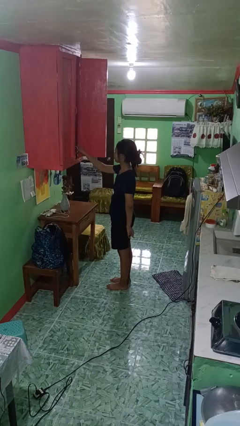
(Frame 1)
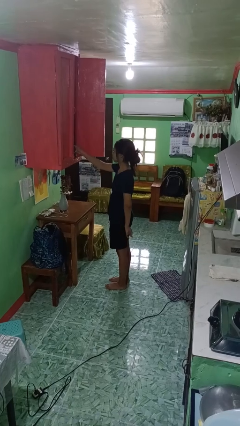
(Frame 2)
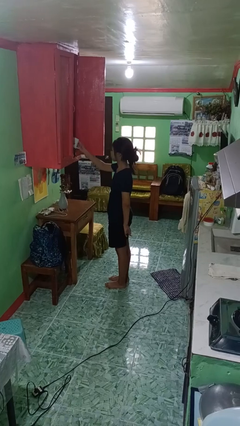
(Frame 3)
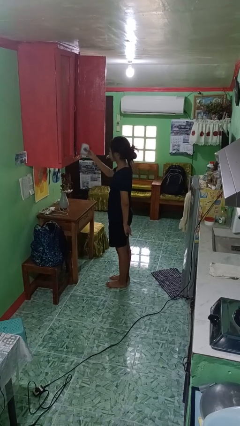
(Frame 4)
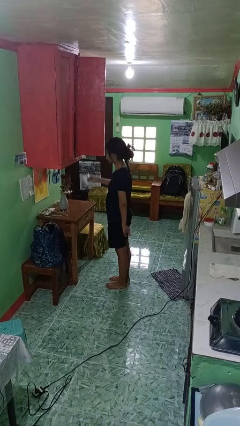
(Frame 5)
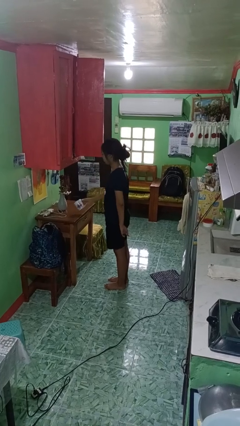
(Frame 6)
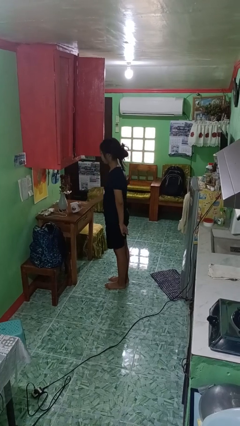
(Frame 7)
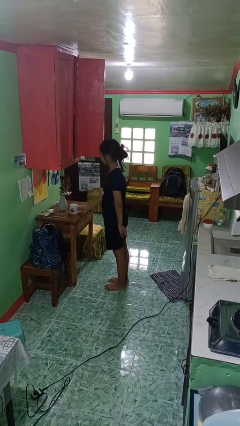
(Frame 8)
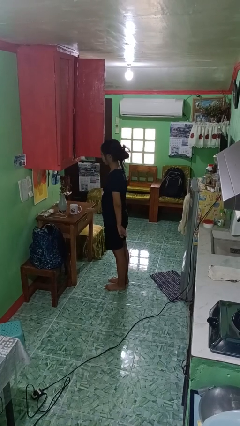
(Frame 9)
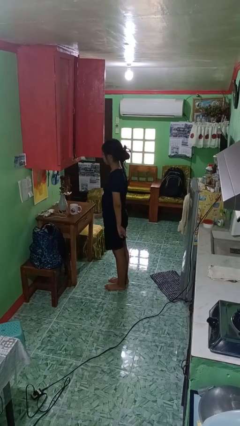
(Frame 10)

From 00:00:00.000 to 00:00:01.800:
person takes object from cabinet

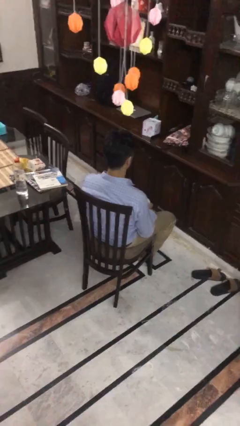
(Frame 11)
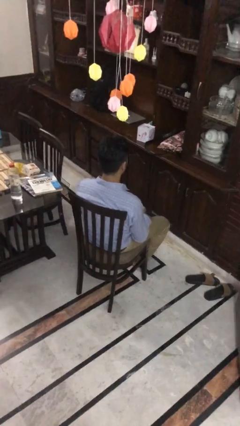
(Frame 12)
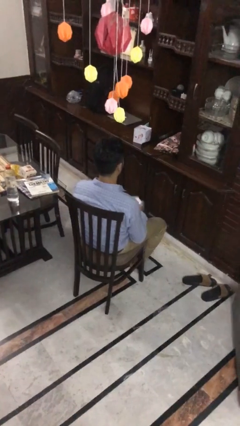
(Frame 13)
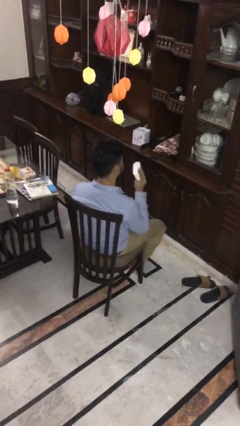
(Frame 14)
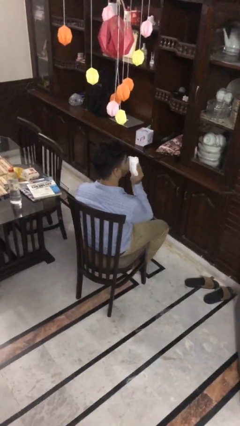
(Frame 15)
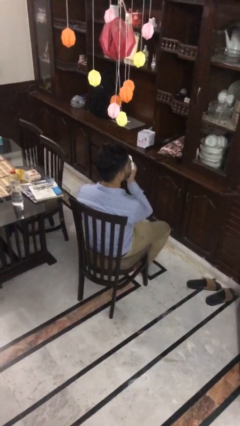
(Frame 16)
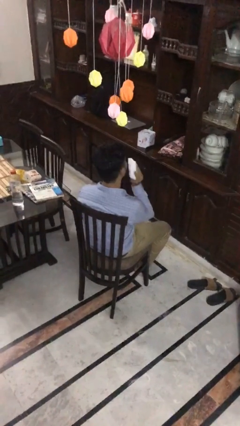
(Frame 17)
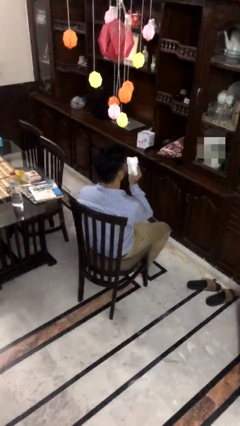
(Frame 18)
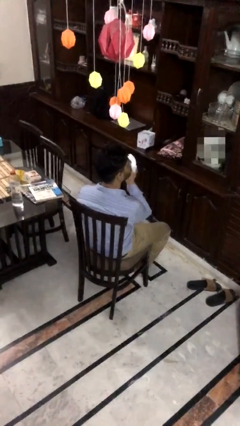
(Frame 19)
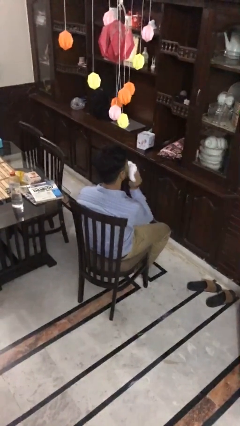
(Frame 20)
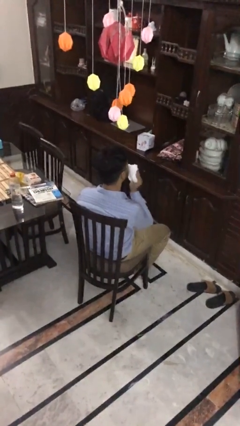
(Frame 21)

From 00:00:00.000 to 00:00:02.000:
person wipes mouth with napkin

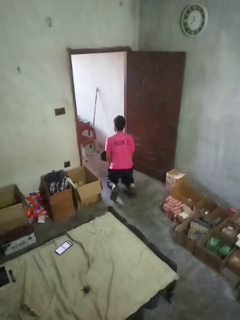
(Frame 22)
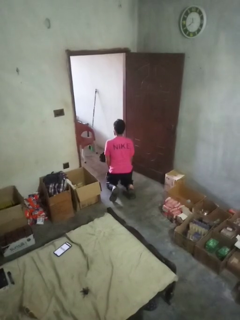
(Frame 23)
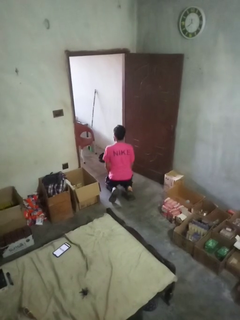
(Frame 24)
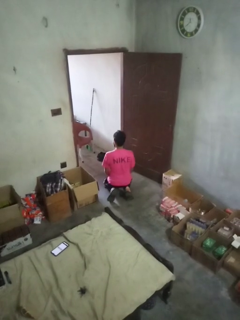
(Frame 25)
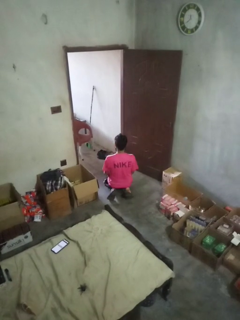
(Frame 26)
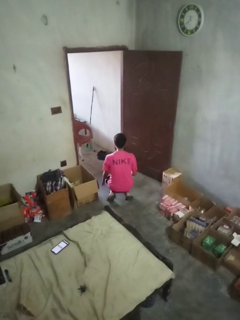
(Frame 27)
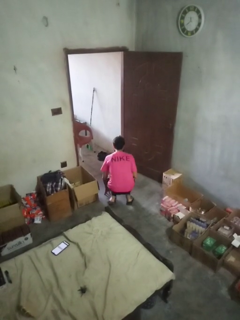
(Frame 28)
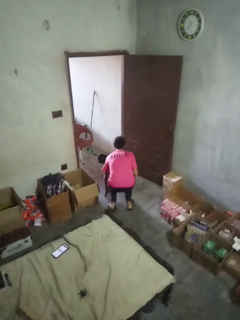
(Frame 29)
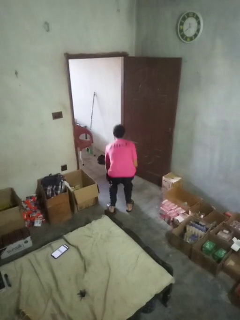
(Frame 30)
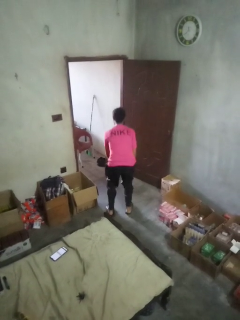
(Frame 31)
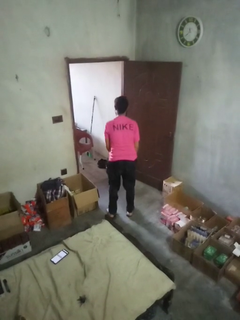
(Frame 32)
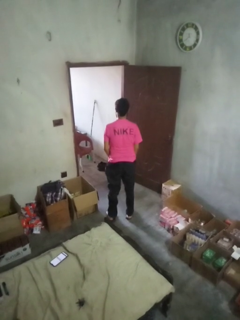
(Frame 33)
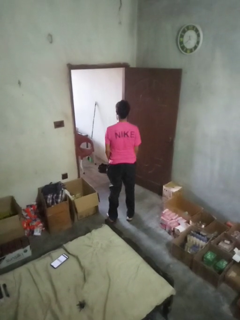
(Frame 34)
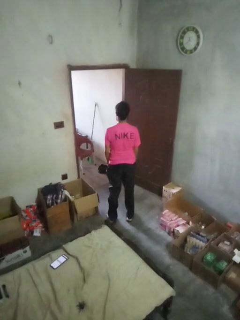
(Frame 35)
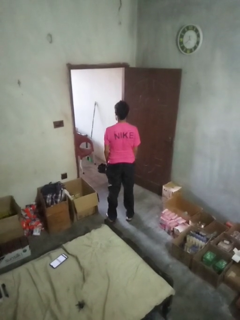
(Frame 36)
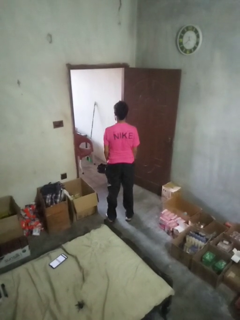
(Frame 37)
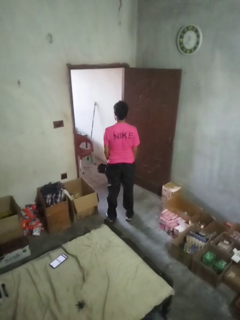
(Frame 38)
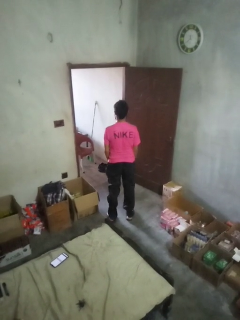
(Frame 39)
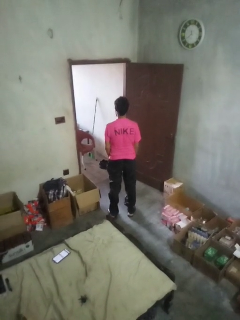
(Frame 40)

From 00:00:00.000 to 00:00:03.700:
person stands up from floor

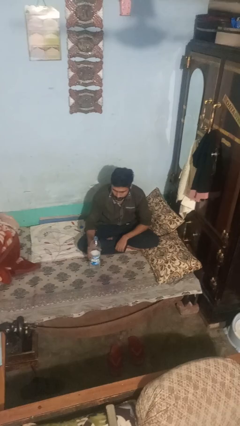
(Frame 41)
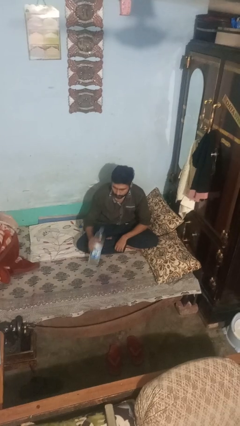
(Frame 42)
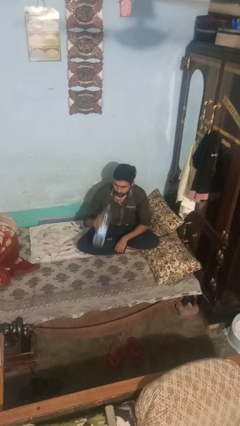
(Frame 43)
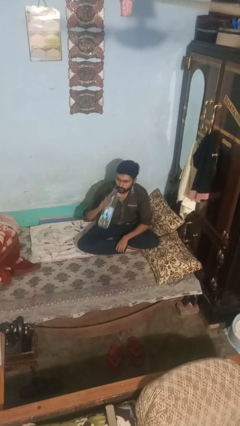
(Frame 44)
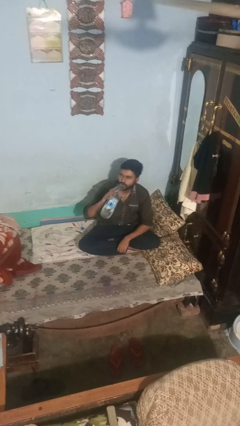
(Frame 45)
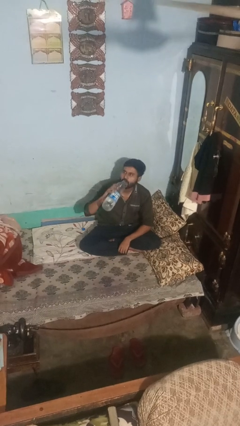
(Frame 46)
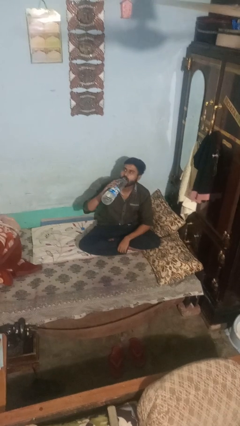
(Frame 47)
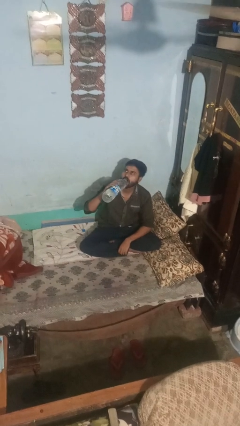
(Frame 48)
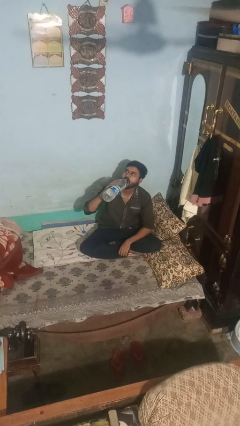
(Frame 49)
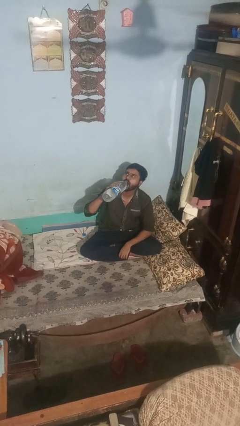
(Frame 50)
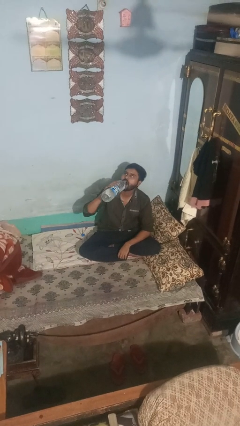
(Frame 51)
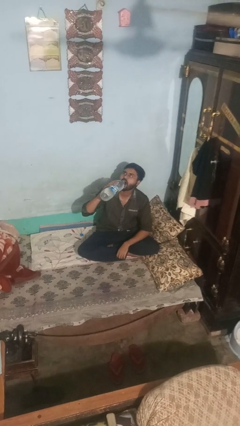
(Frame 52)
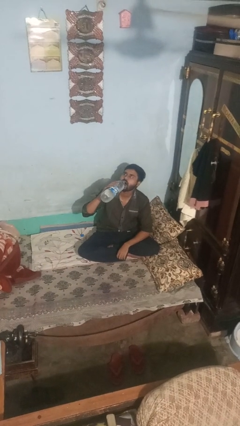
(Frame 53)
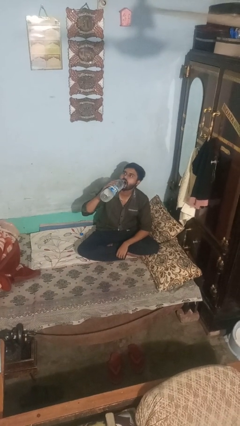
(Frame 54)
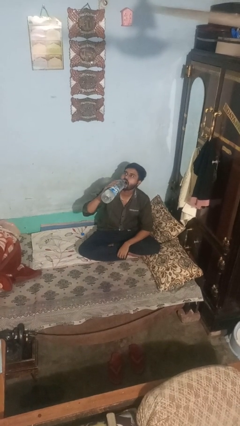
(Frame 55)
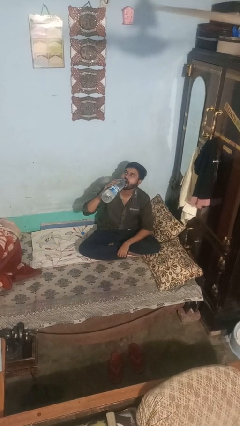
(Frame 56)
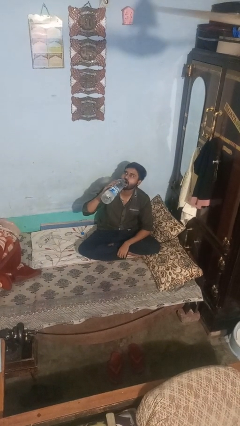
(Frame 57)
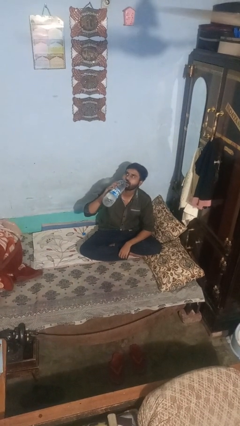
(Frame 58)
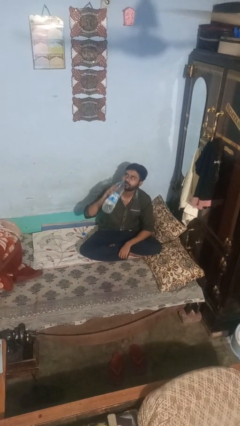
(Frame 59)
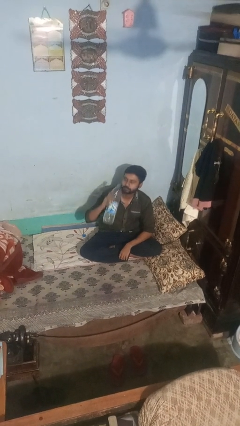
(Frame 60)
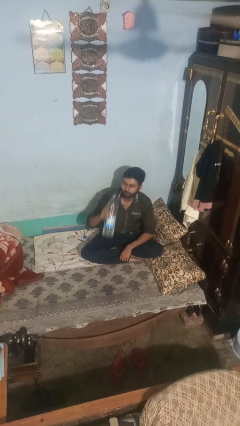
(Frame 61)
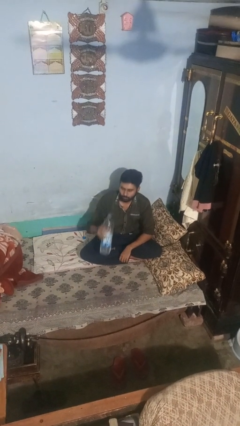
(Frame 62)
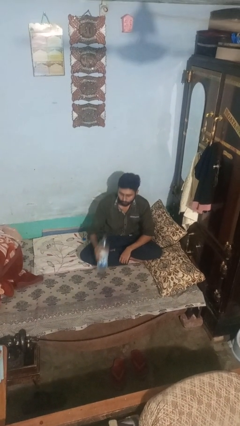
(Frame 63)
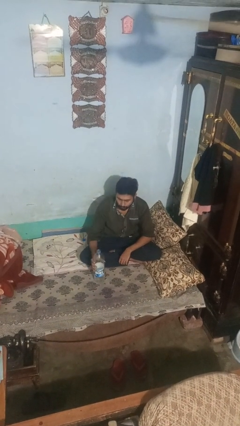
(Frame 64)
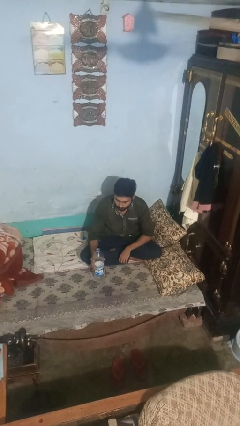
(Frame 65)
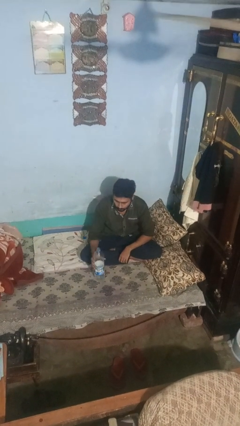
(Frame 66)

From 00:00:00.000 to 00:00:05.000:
person drinks from bottle

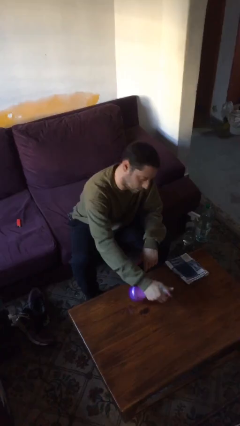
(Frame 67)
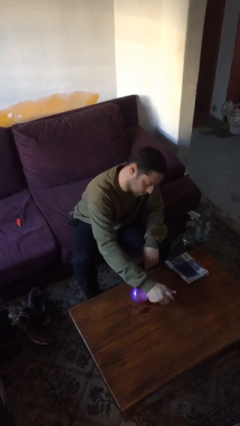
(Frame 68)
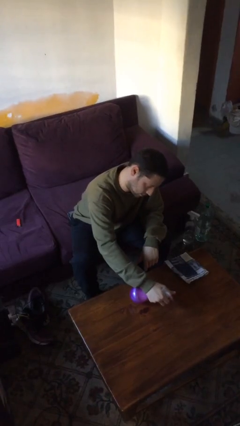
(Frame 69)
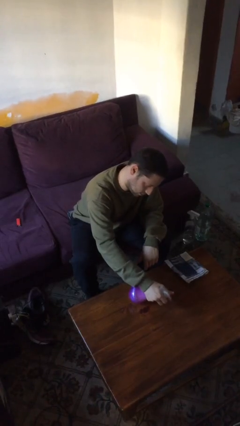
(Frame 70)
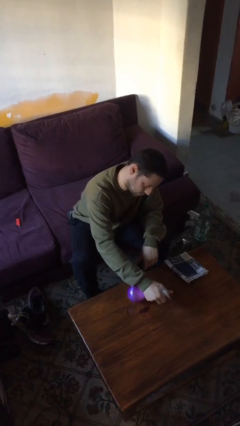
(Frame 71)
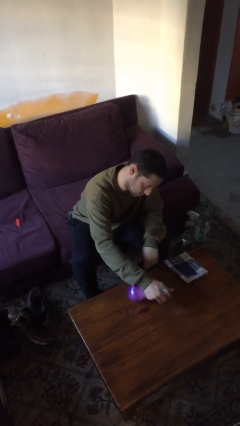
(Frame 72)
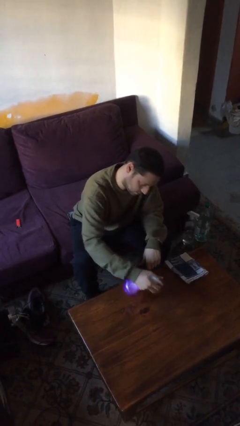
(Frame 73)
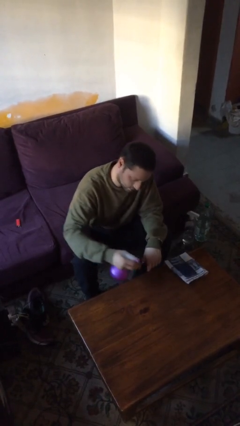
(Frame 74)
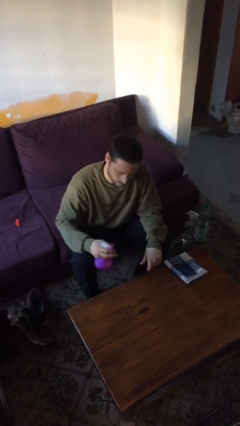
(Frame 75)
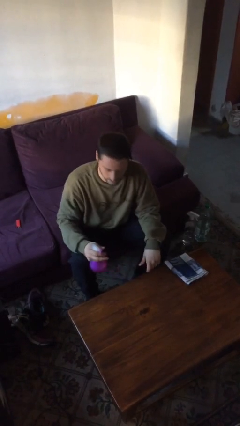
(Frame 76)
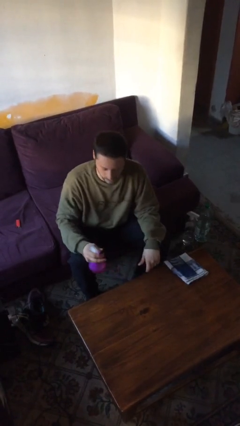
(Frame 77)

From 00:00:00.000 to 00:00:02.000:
person sprays from bottle

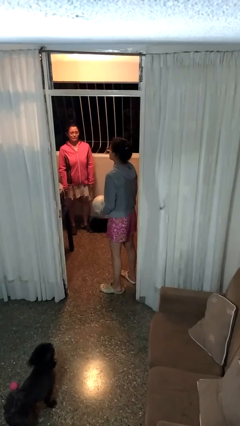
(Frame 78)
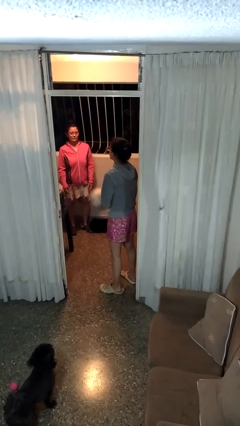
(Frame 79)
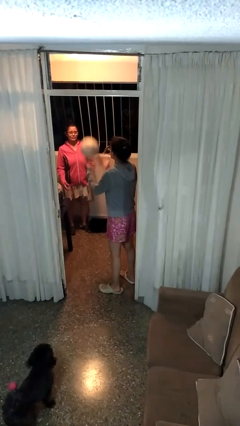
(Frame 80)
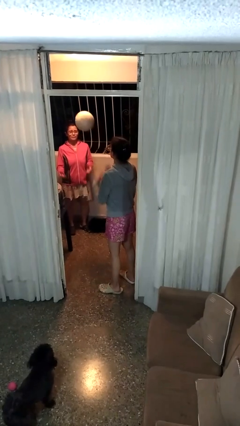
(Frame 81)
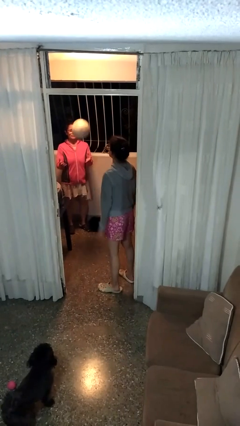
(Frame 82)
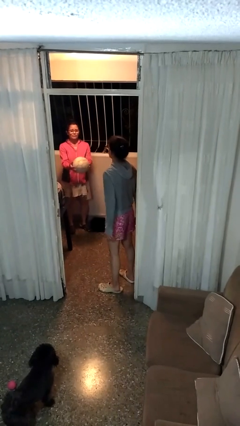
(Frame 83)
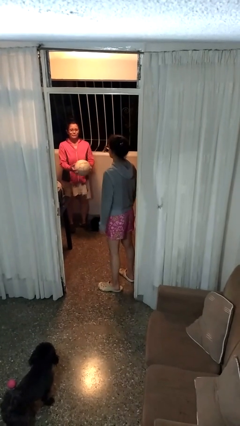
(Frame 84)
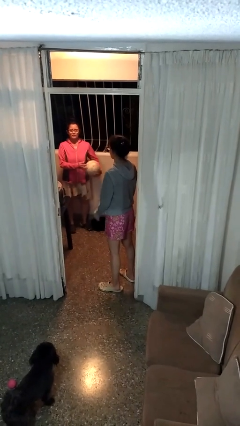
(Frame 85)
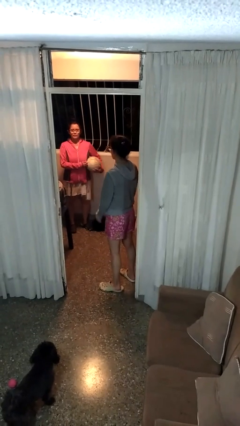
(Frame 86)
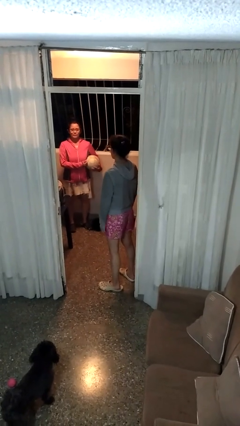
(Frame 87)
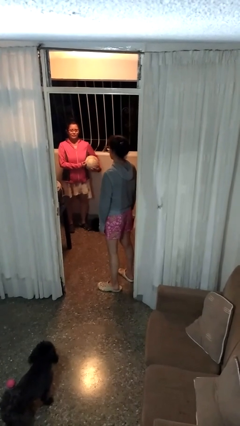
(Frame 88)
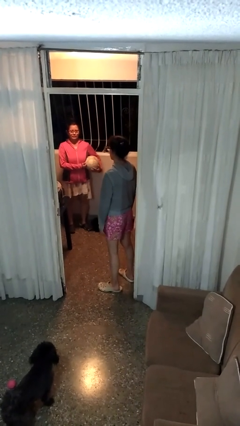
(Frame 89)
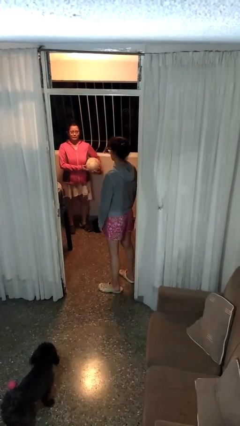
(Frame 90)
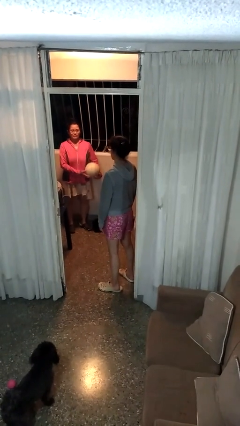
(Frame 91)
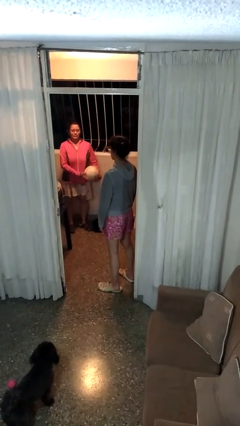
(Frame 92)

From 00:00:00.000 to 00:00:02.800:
person throws object to person

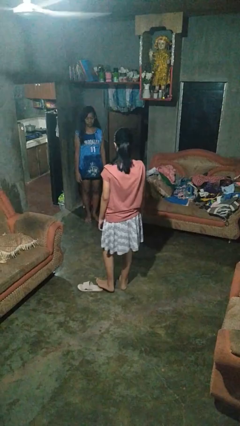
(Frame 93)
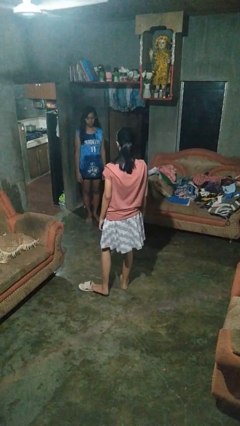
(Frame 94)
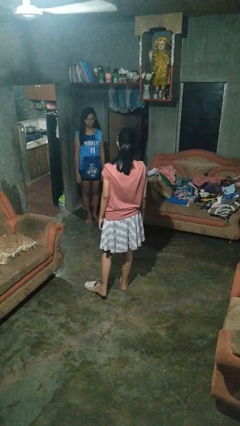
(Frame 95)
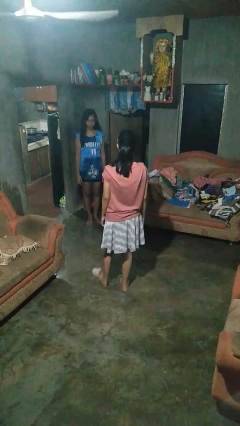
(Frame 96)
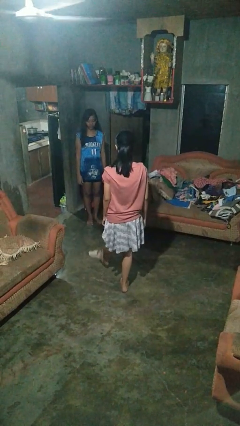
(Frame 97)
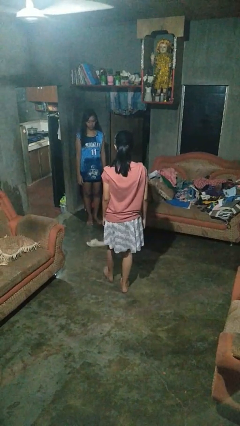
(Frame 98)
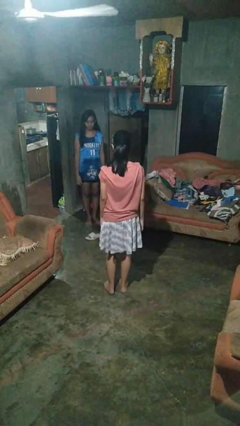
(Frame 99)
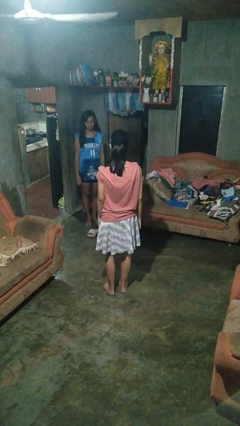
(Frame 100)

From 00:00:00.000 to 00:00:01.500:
person kicks object to person
